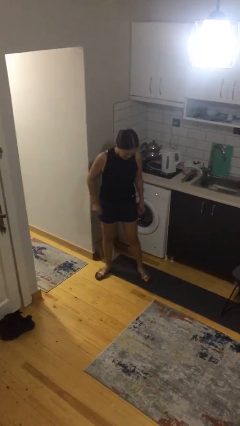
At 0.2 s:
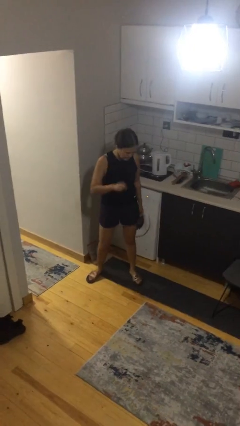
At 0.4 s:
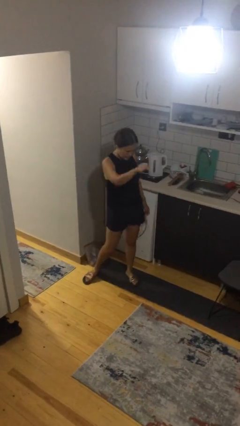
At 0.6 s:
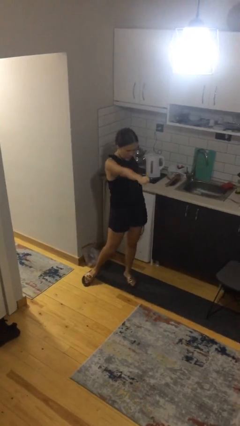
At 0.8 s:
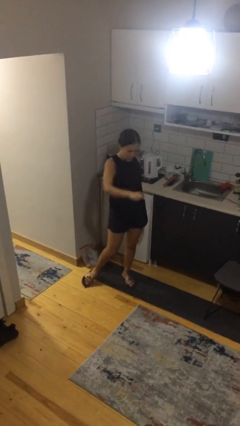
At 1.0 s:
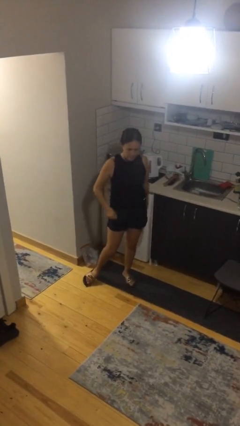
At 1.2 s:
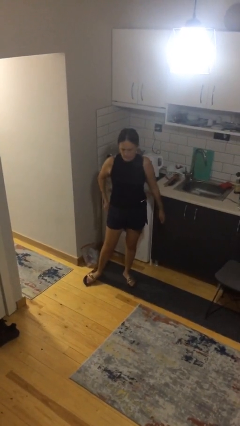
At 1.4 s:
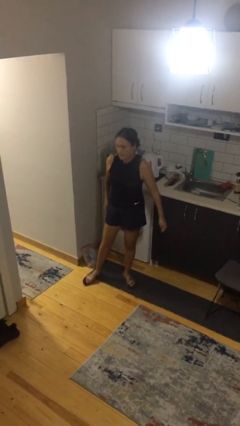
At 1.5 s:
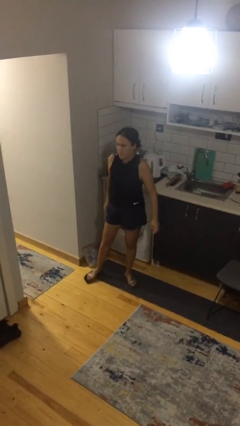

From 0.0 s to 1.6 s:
person punches

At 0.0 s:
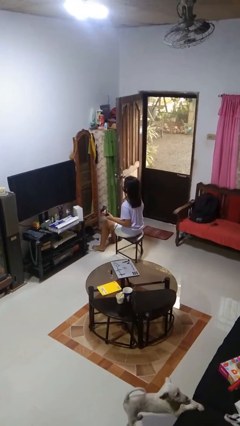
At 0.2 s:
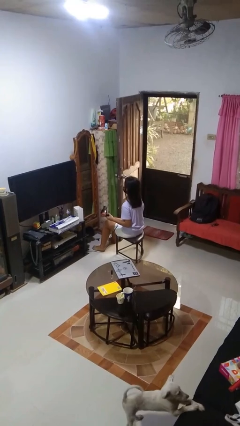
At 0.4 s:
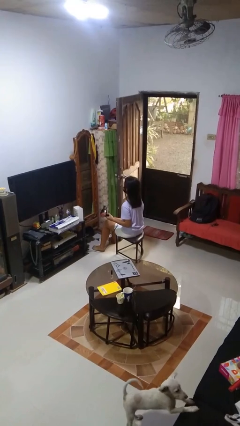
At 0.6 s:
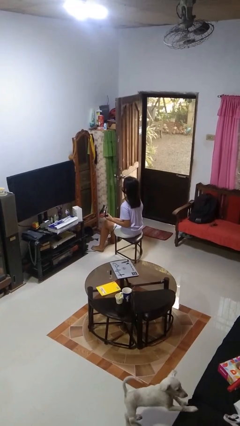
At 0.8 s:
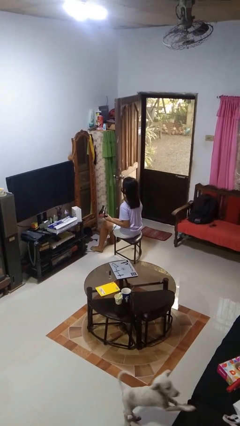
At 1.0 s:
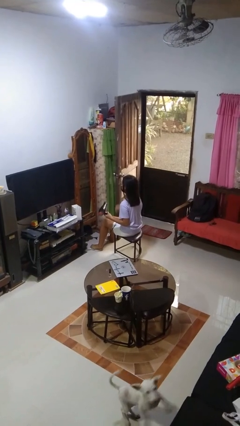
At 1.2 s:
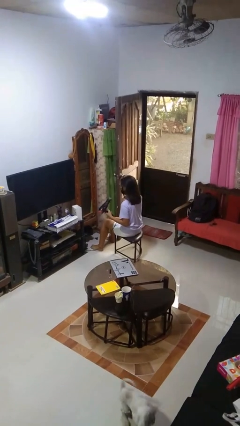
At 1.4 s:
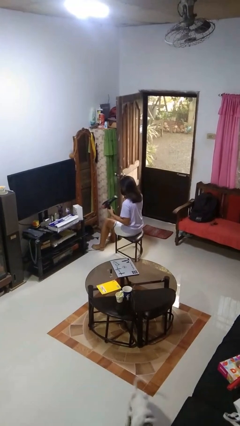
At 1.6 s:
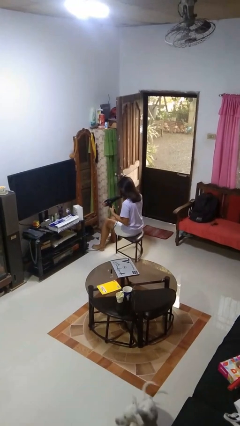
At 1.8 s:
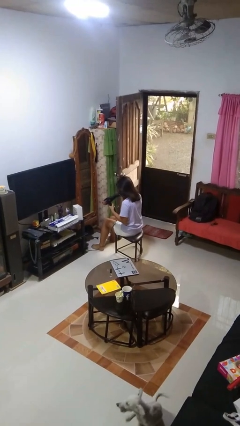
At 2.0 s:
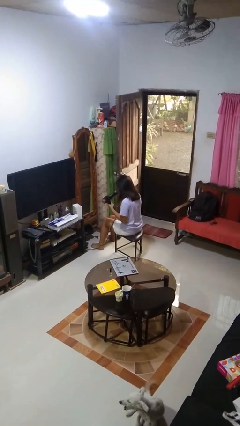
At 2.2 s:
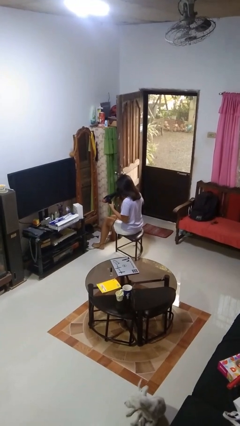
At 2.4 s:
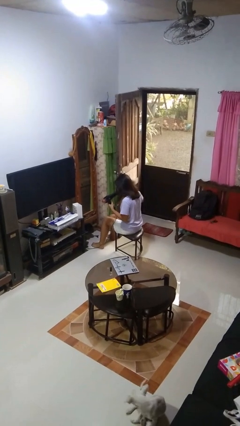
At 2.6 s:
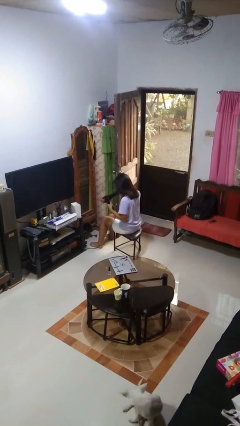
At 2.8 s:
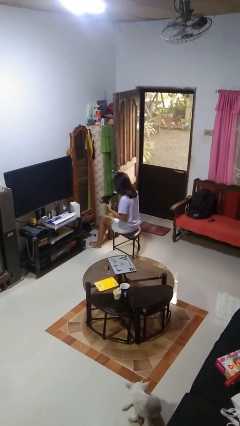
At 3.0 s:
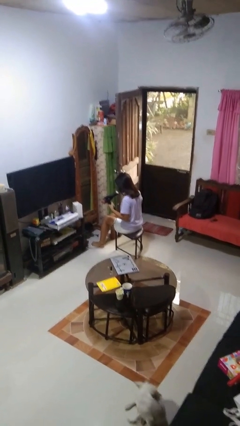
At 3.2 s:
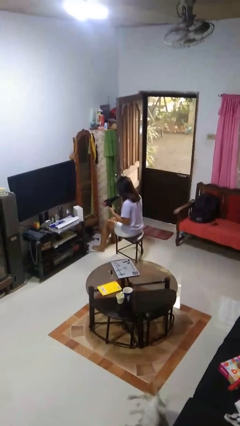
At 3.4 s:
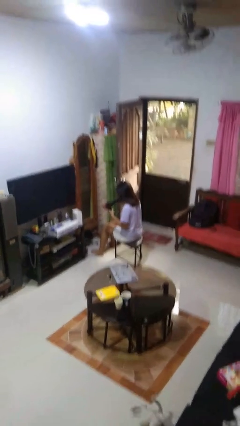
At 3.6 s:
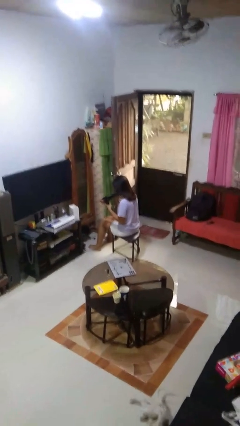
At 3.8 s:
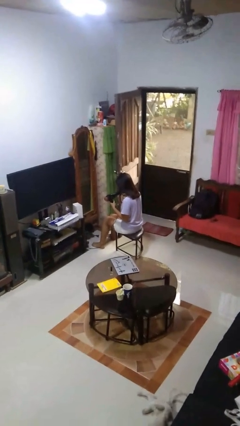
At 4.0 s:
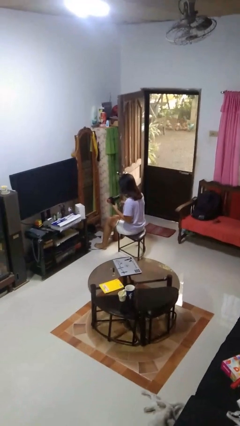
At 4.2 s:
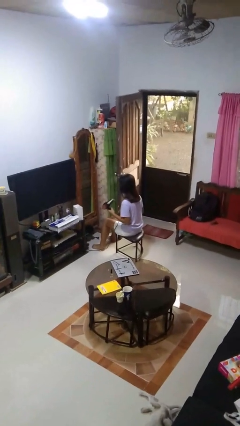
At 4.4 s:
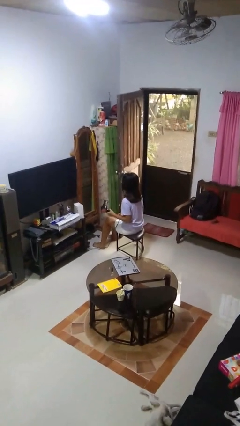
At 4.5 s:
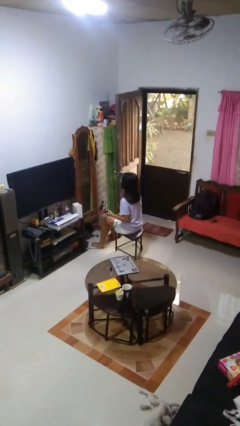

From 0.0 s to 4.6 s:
person dries hair with hairdryer

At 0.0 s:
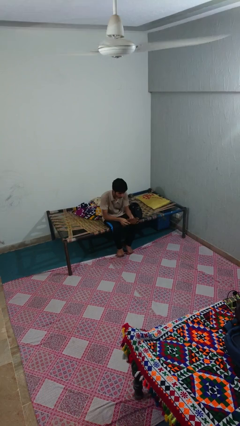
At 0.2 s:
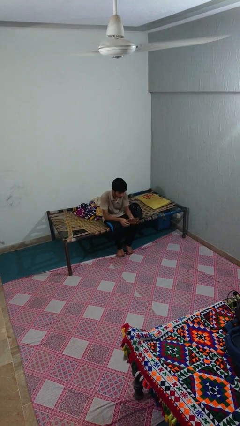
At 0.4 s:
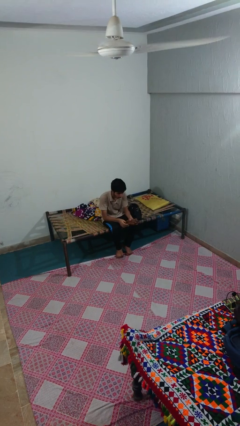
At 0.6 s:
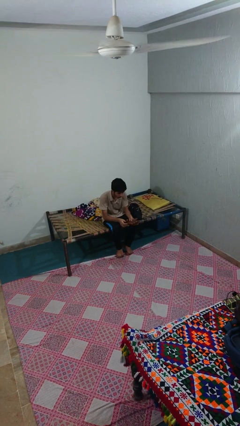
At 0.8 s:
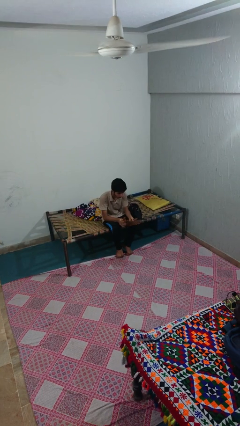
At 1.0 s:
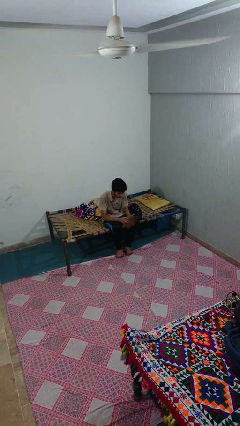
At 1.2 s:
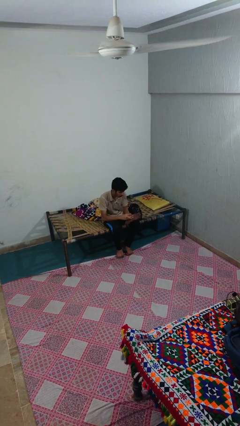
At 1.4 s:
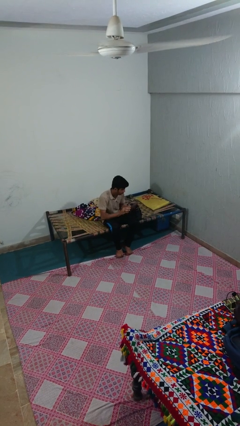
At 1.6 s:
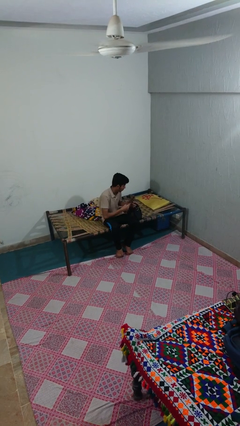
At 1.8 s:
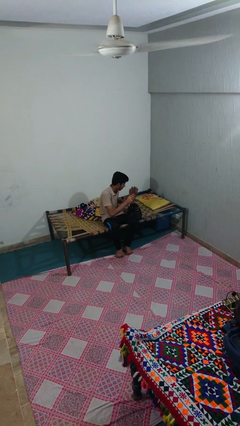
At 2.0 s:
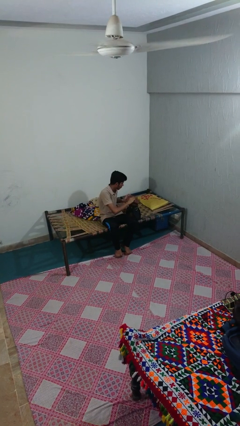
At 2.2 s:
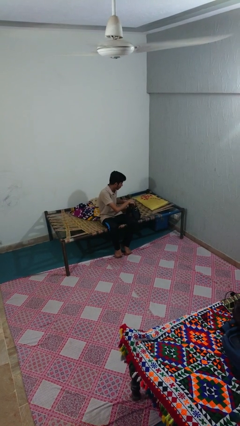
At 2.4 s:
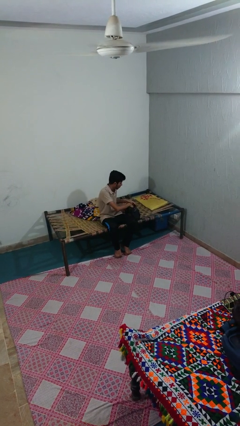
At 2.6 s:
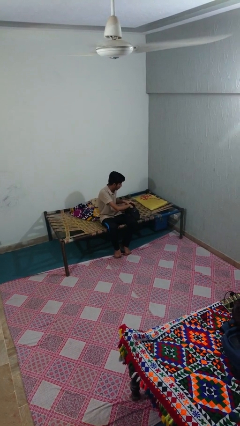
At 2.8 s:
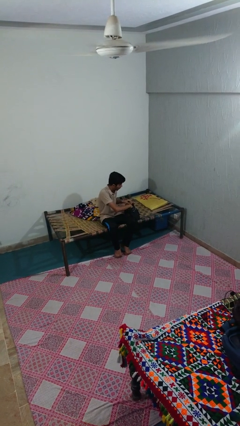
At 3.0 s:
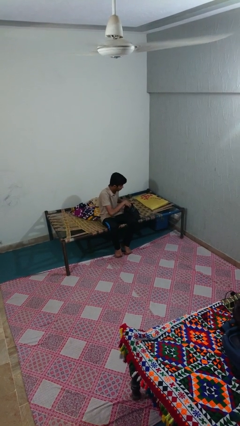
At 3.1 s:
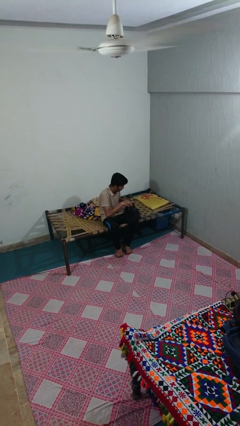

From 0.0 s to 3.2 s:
person puts object into purse

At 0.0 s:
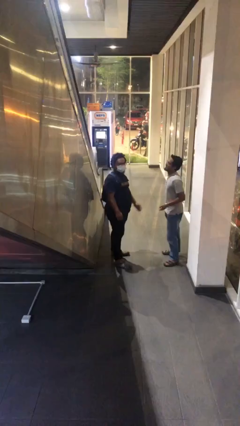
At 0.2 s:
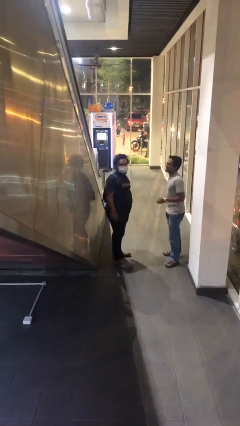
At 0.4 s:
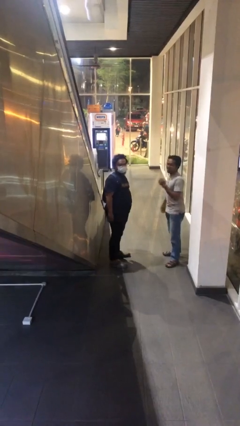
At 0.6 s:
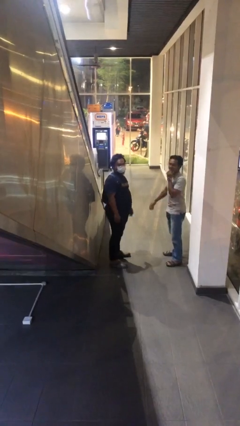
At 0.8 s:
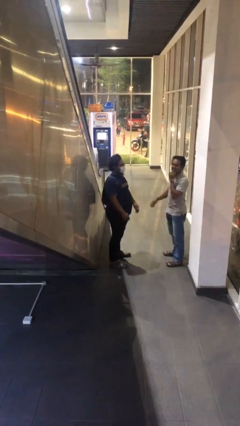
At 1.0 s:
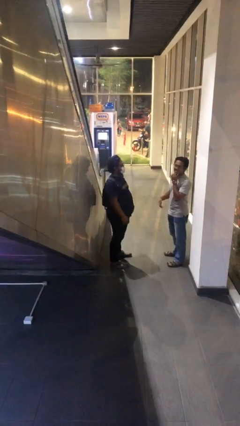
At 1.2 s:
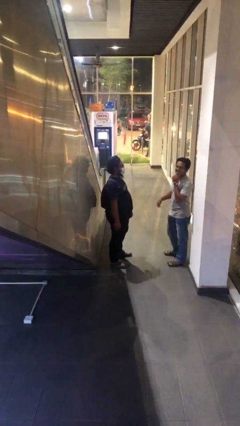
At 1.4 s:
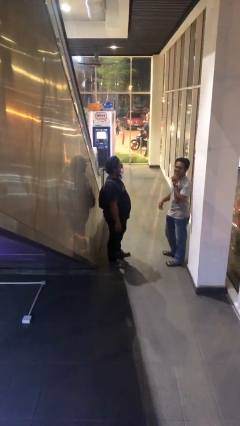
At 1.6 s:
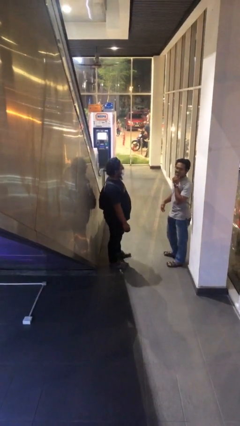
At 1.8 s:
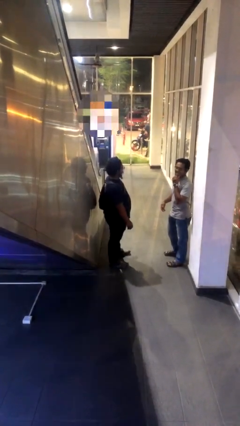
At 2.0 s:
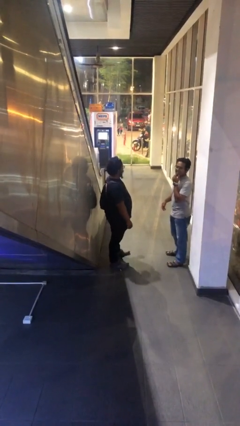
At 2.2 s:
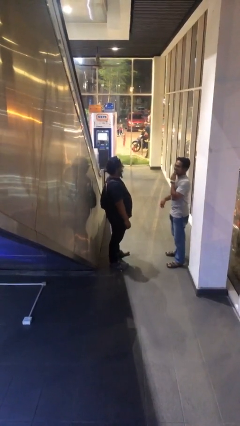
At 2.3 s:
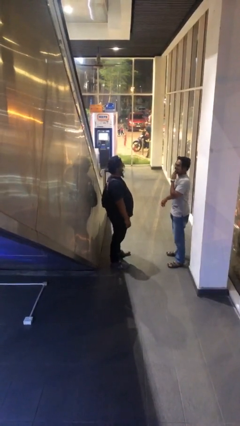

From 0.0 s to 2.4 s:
person talks to person

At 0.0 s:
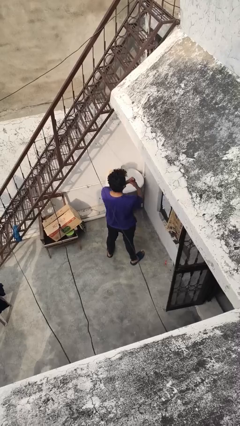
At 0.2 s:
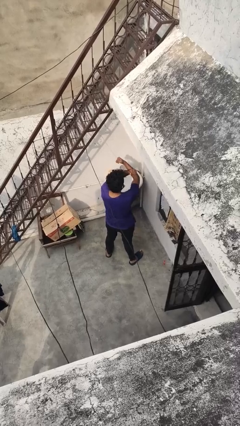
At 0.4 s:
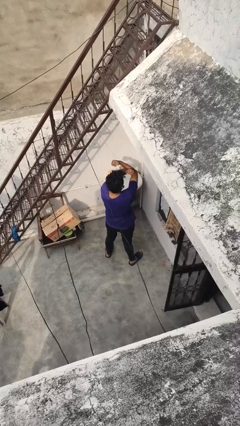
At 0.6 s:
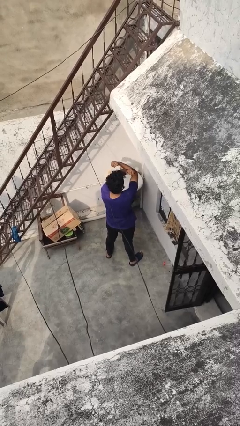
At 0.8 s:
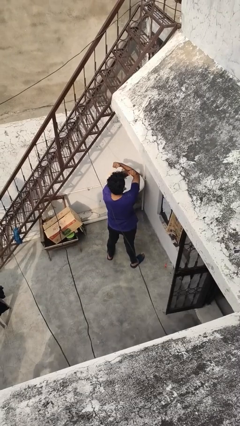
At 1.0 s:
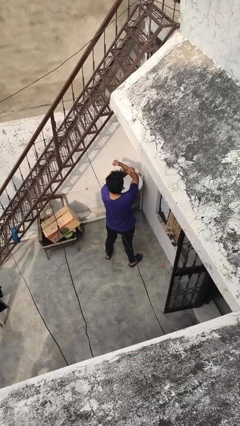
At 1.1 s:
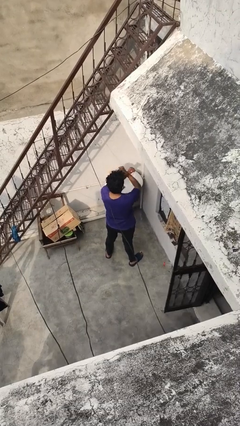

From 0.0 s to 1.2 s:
person gestures arms x

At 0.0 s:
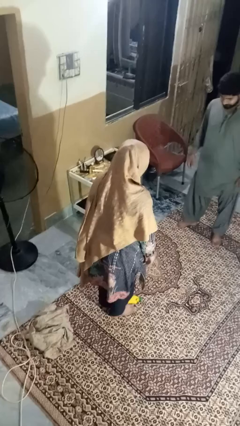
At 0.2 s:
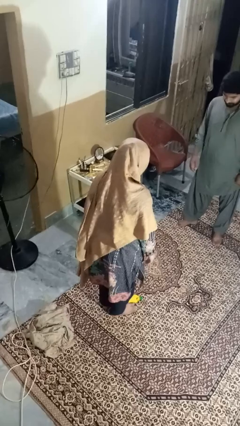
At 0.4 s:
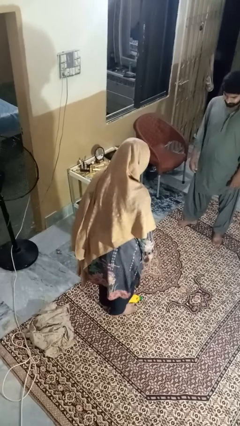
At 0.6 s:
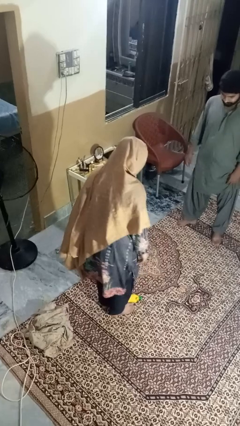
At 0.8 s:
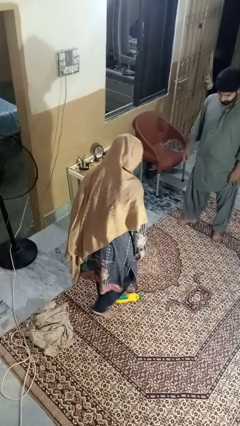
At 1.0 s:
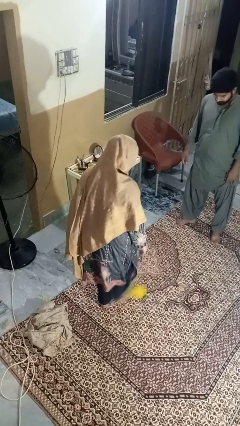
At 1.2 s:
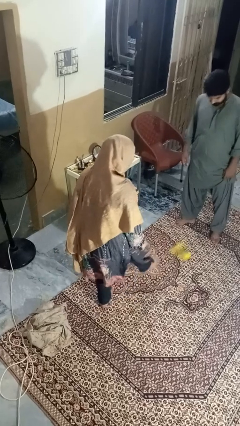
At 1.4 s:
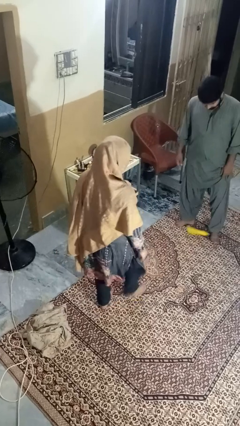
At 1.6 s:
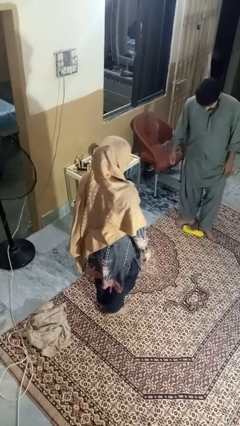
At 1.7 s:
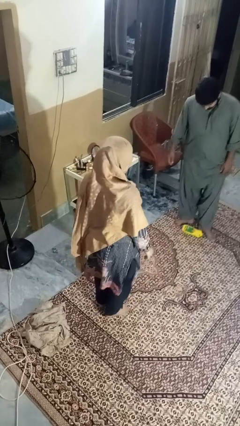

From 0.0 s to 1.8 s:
person kicks object to person

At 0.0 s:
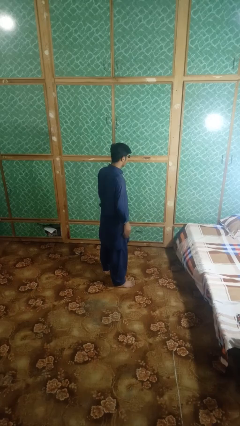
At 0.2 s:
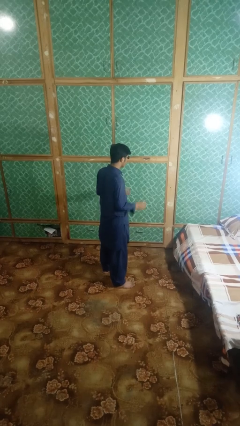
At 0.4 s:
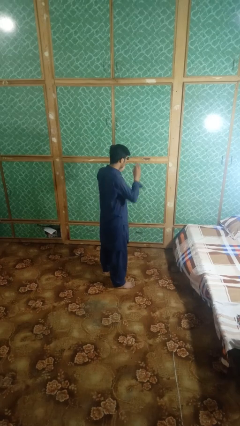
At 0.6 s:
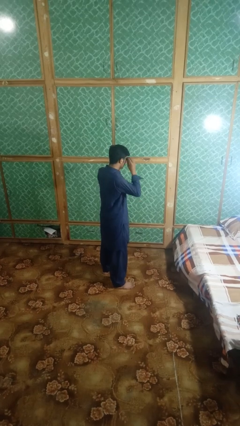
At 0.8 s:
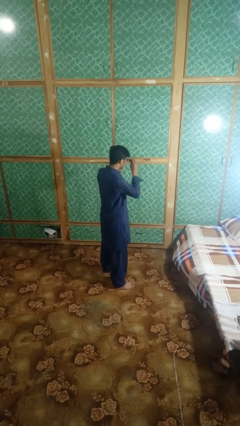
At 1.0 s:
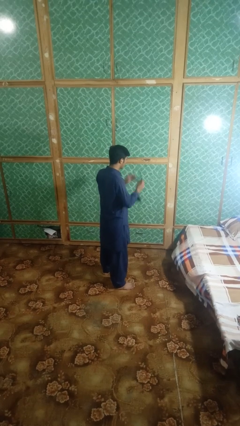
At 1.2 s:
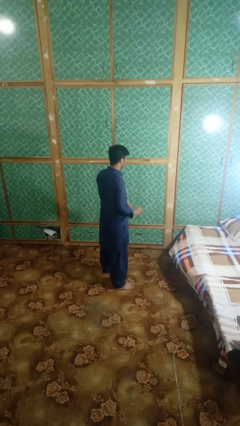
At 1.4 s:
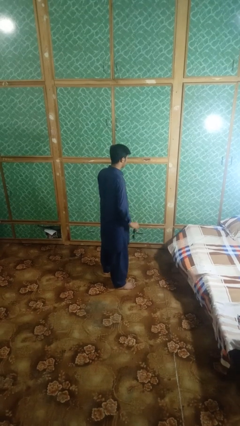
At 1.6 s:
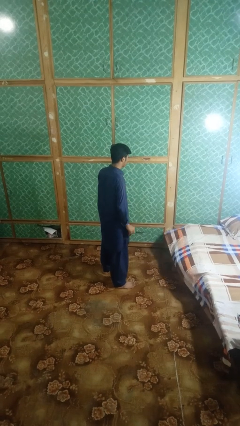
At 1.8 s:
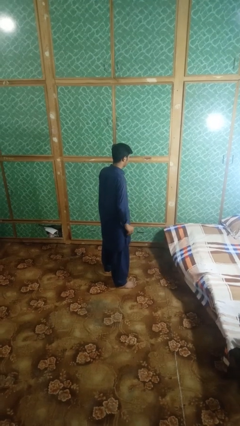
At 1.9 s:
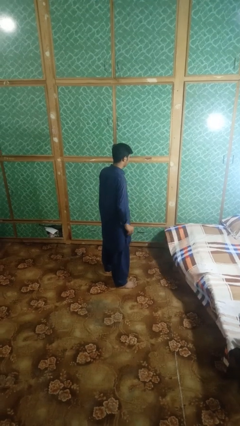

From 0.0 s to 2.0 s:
person takes off sunglasses

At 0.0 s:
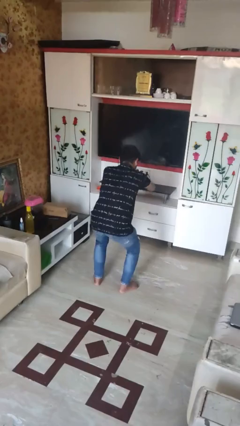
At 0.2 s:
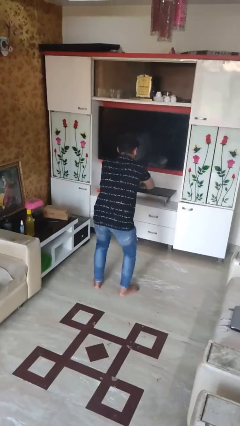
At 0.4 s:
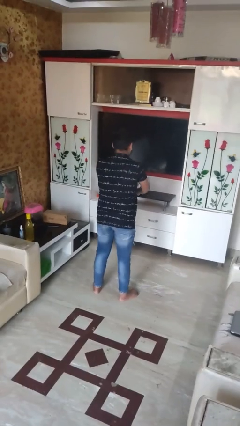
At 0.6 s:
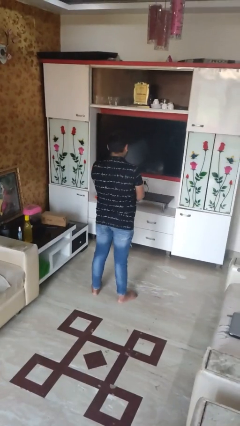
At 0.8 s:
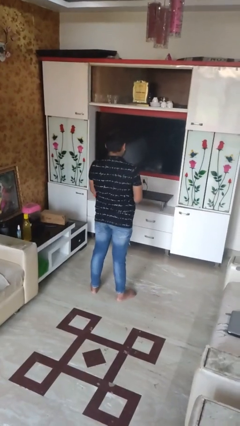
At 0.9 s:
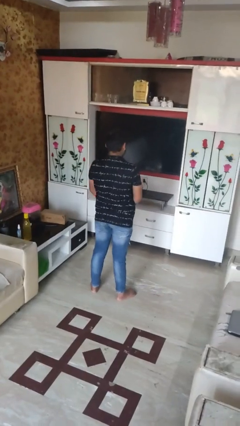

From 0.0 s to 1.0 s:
person stands up
